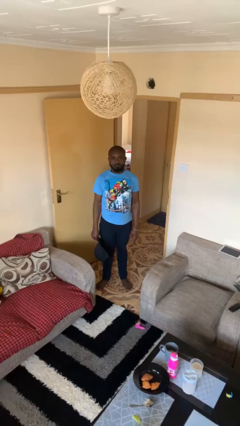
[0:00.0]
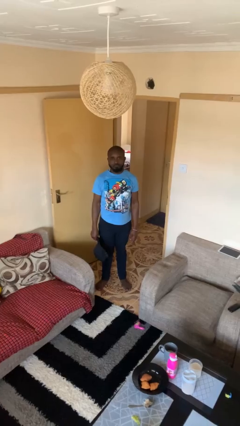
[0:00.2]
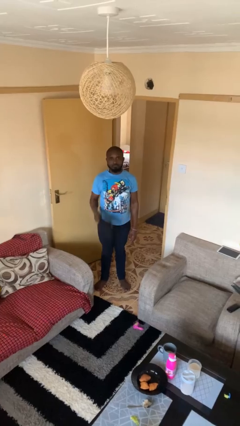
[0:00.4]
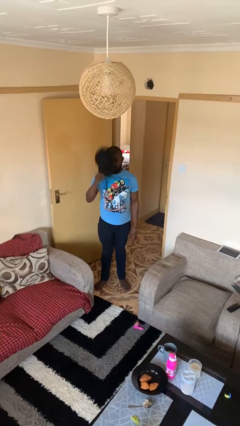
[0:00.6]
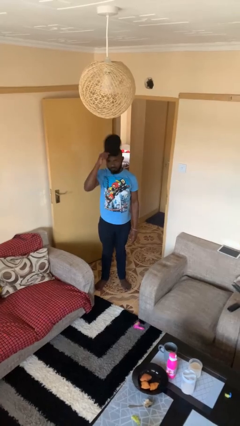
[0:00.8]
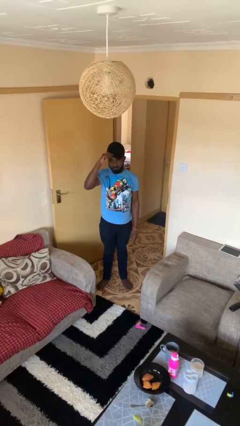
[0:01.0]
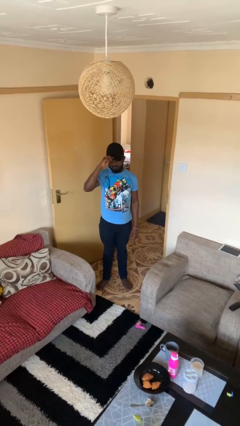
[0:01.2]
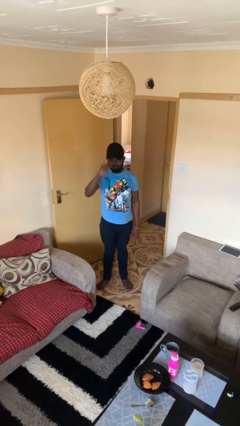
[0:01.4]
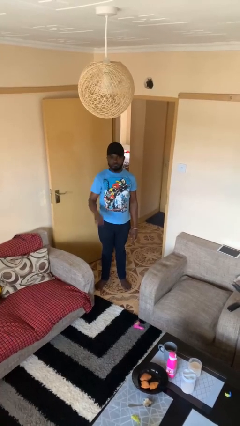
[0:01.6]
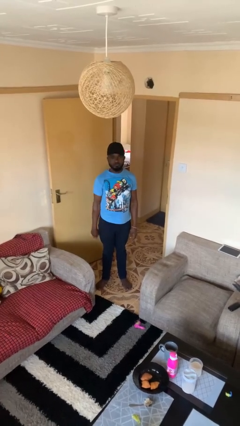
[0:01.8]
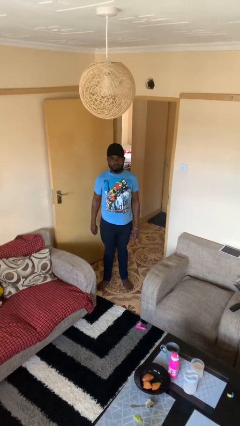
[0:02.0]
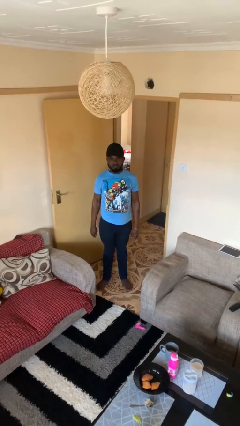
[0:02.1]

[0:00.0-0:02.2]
person puts on hat

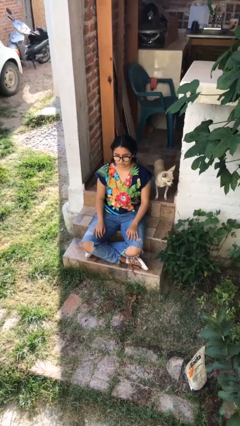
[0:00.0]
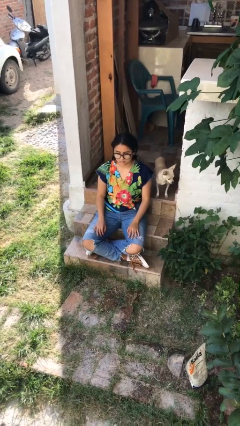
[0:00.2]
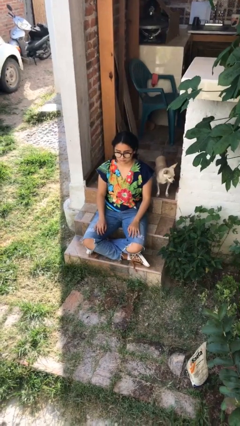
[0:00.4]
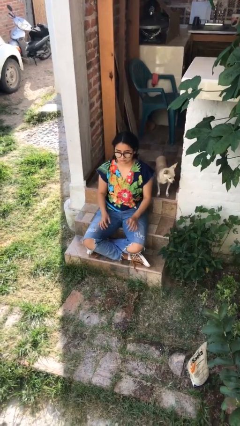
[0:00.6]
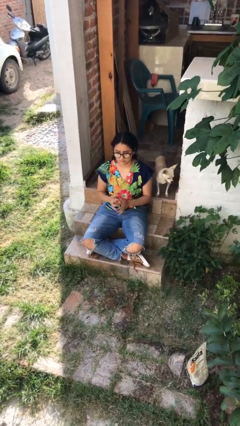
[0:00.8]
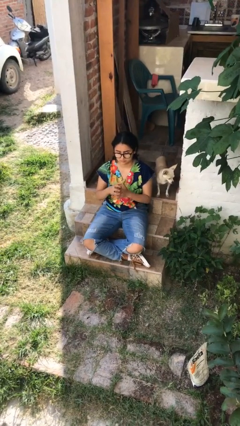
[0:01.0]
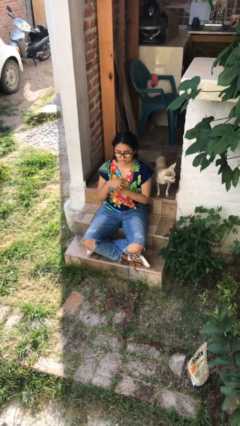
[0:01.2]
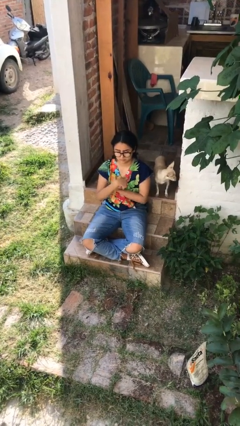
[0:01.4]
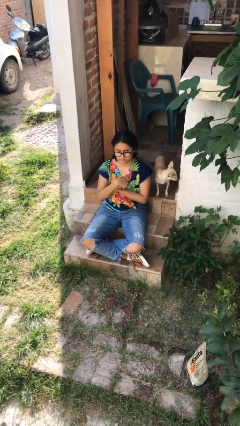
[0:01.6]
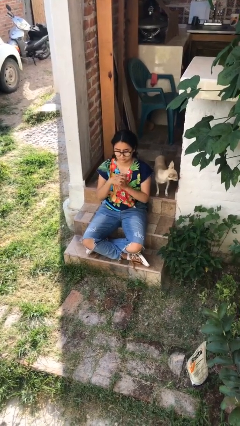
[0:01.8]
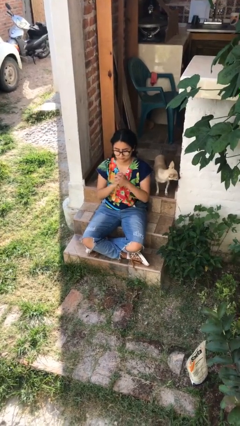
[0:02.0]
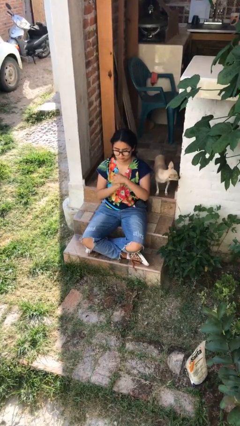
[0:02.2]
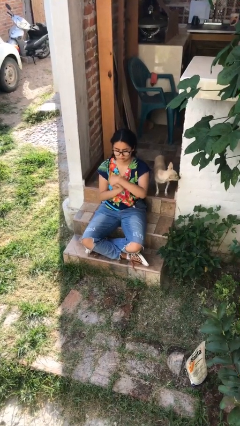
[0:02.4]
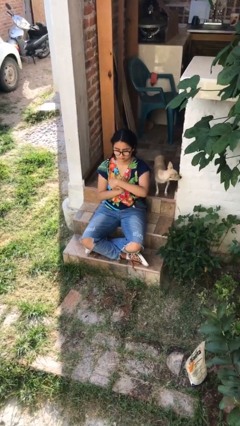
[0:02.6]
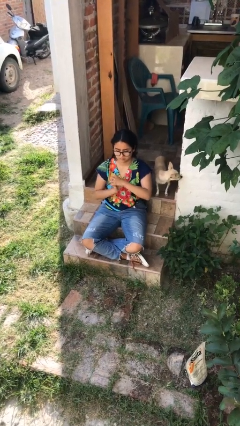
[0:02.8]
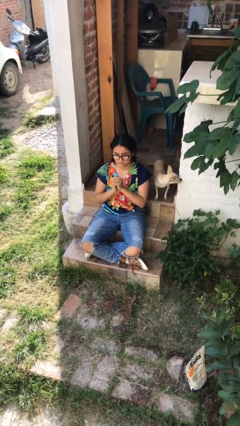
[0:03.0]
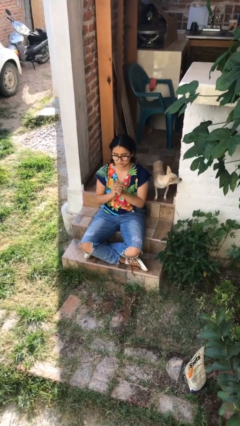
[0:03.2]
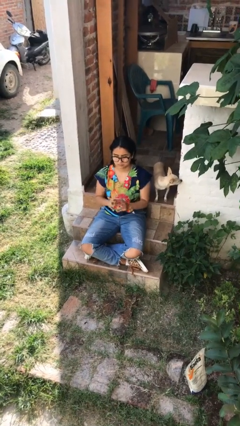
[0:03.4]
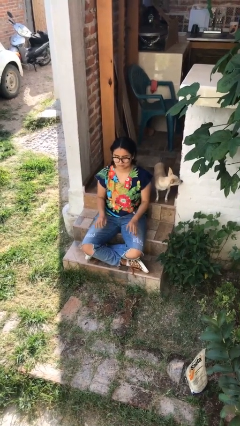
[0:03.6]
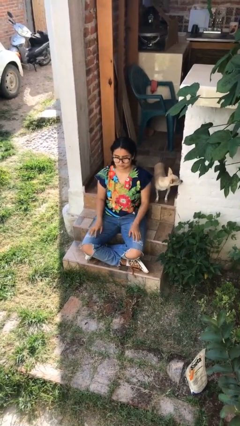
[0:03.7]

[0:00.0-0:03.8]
person cracks knuckles

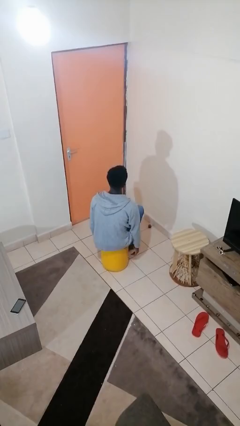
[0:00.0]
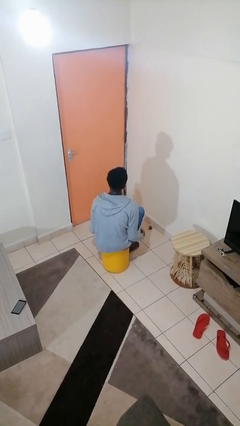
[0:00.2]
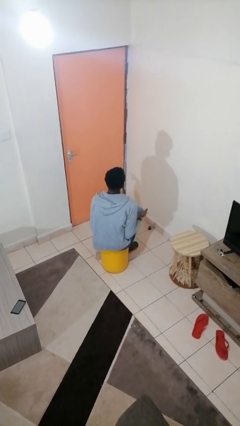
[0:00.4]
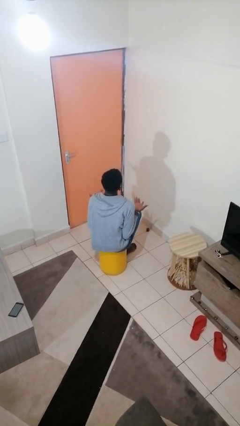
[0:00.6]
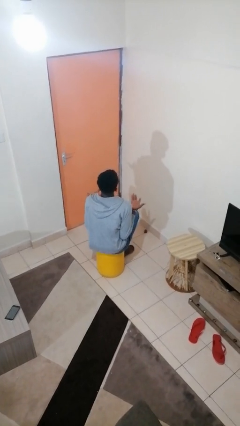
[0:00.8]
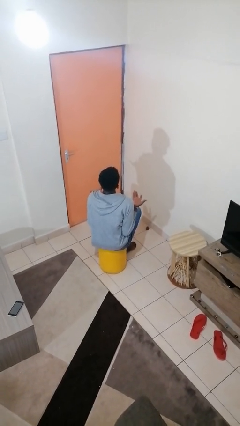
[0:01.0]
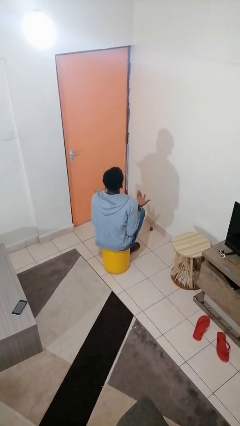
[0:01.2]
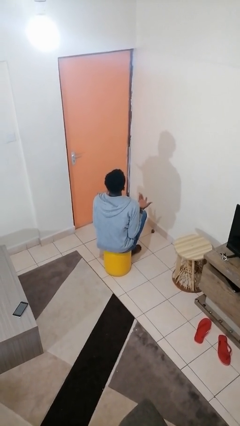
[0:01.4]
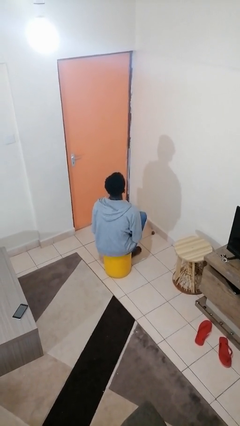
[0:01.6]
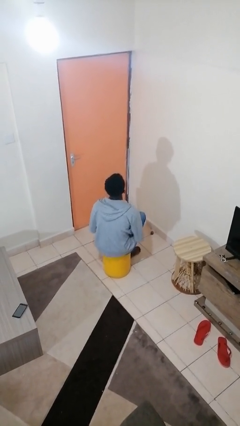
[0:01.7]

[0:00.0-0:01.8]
person shrugs

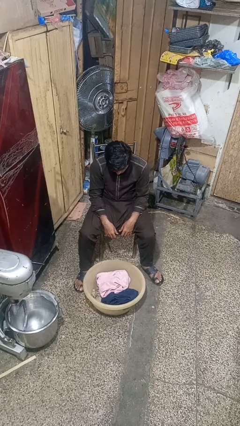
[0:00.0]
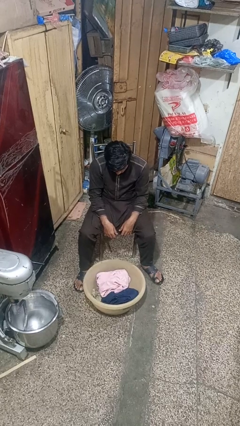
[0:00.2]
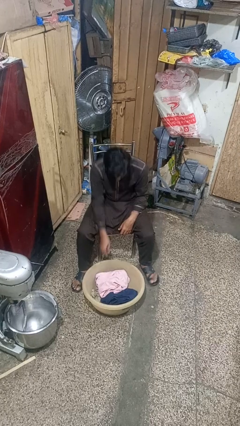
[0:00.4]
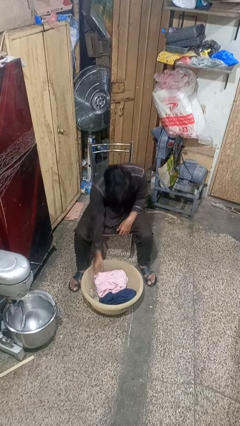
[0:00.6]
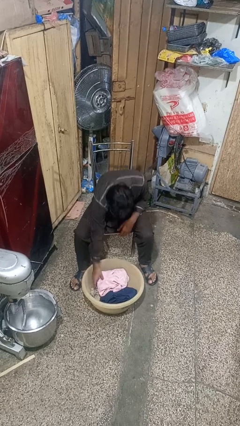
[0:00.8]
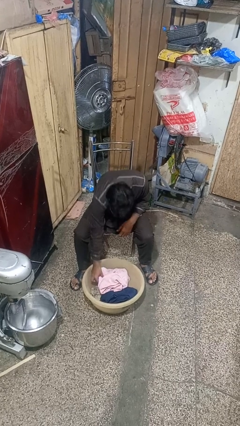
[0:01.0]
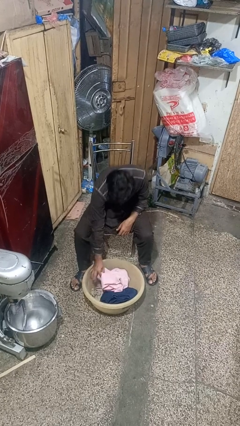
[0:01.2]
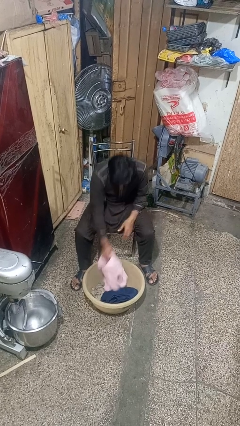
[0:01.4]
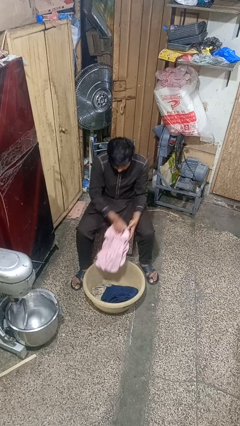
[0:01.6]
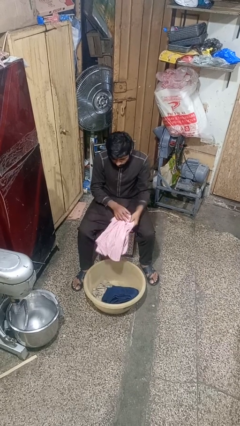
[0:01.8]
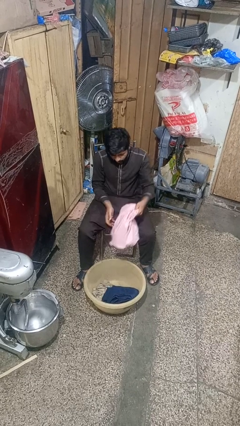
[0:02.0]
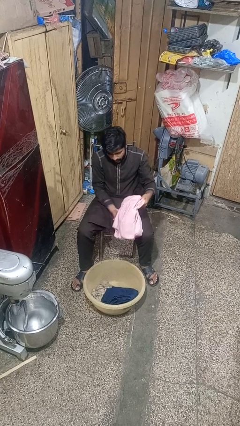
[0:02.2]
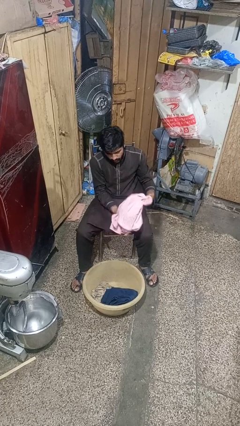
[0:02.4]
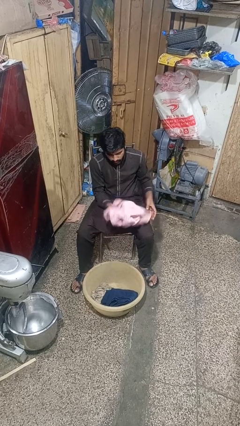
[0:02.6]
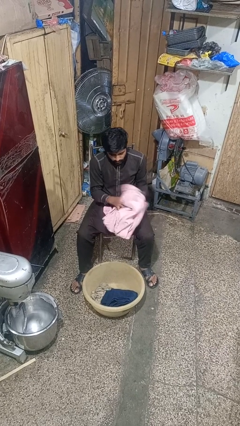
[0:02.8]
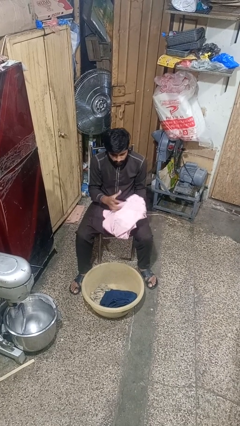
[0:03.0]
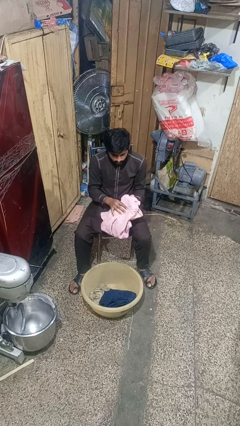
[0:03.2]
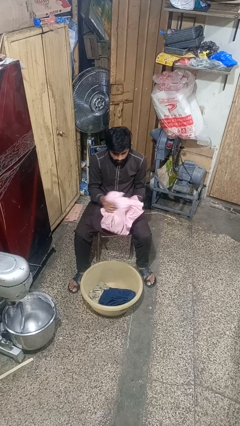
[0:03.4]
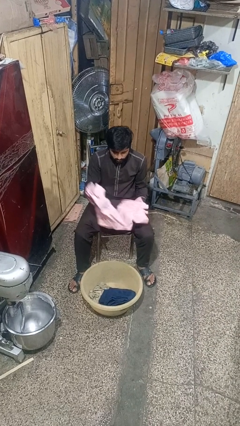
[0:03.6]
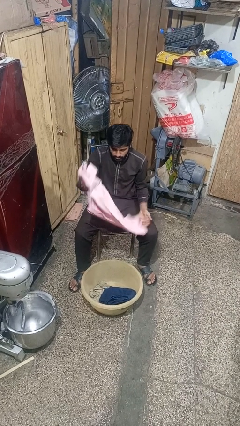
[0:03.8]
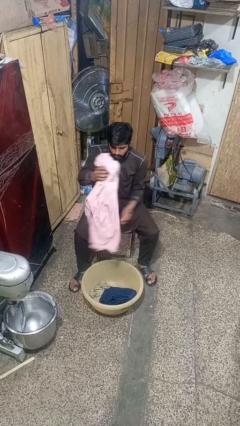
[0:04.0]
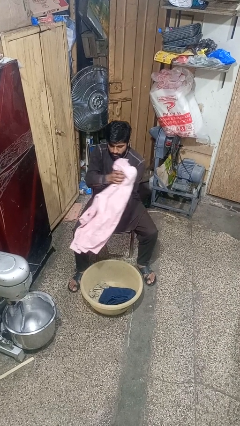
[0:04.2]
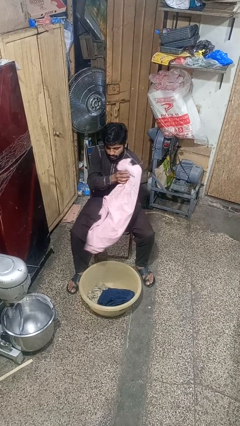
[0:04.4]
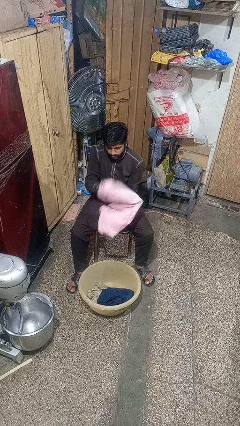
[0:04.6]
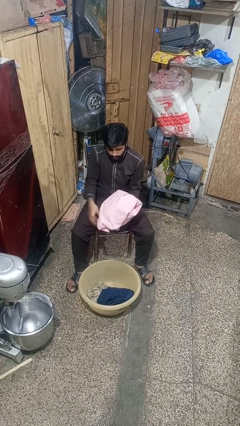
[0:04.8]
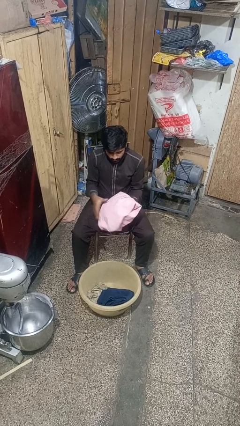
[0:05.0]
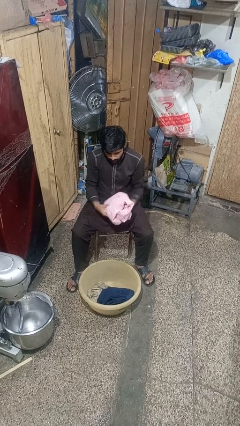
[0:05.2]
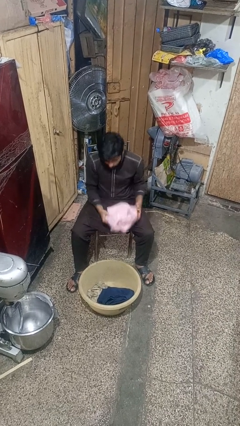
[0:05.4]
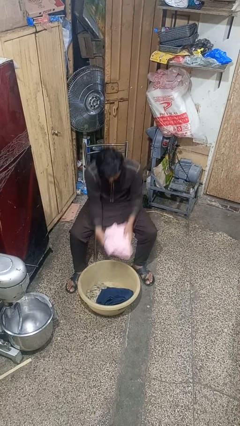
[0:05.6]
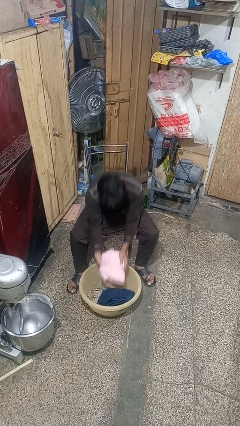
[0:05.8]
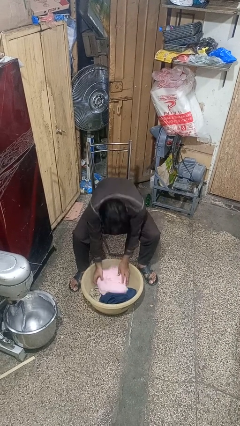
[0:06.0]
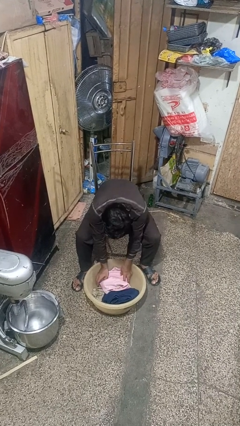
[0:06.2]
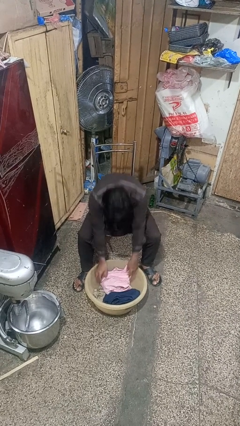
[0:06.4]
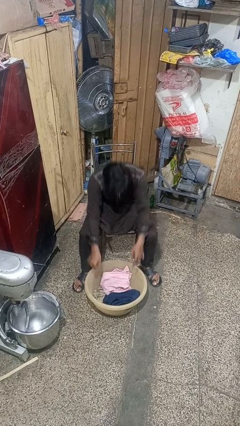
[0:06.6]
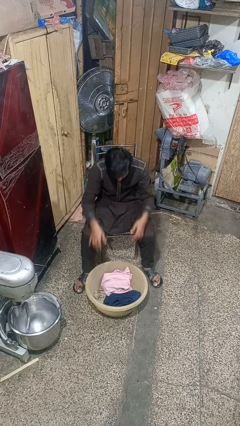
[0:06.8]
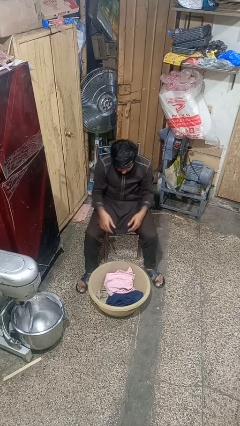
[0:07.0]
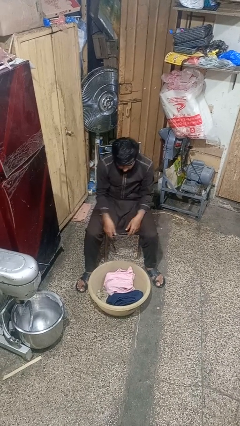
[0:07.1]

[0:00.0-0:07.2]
person folds shirt

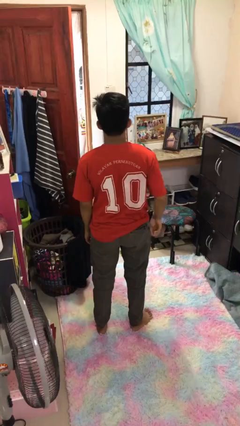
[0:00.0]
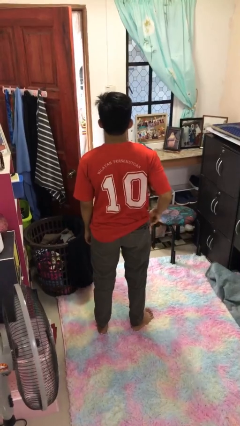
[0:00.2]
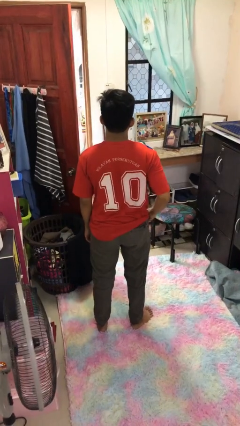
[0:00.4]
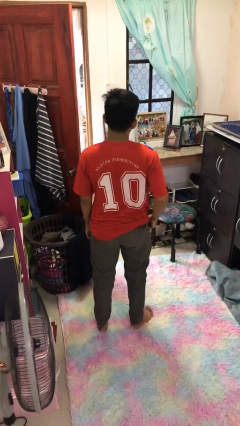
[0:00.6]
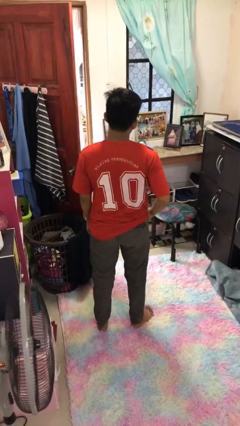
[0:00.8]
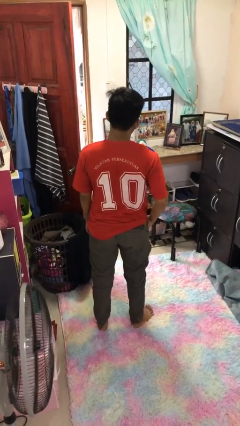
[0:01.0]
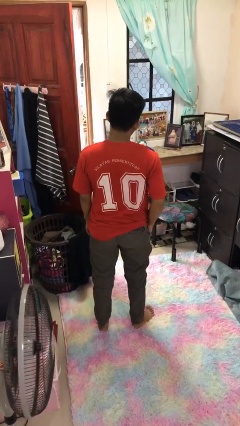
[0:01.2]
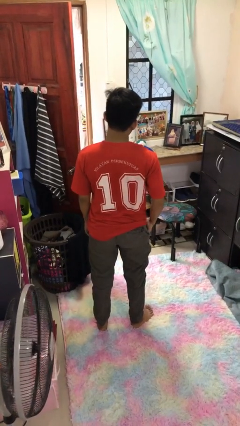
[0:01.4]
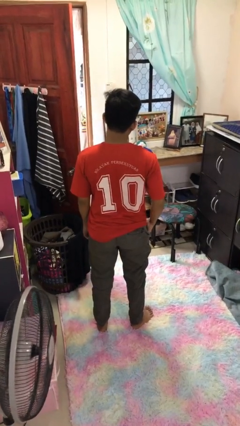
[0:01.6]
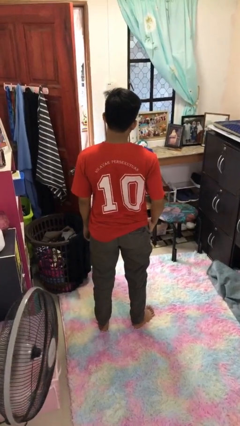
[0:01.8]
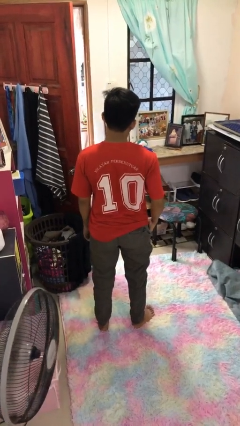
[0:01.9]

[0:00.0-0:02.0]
person puts hands in back pockets

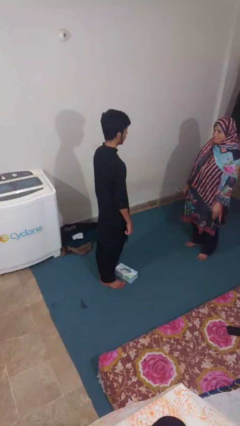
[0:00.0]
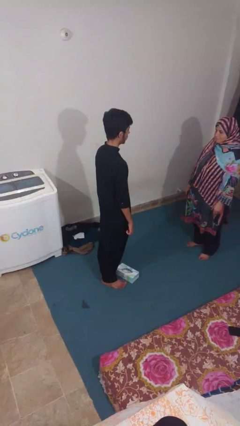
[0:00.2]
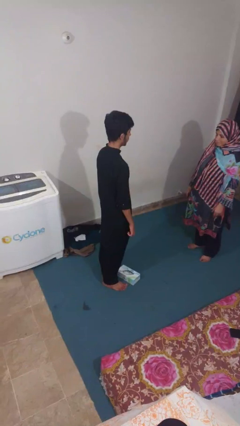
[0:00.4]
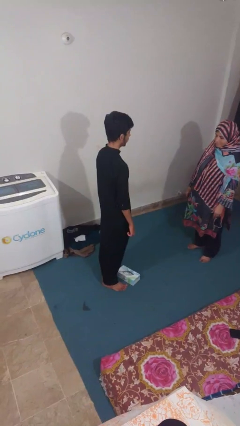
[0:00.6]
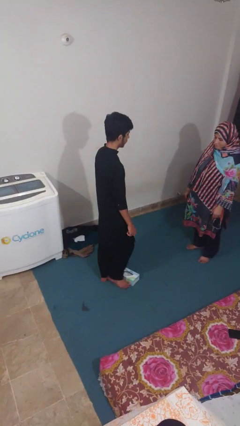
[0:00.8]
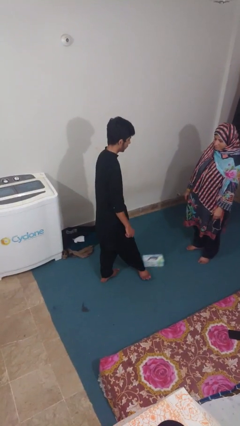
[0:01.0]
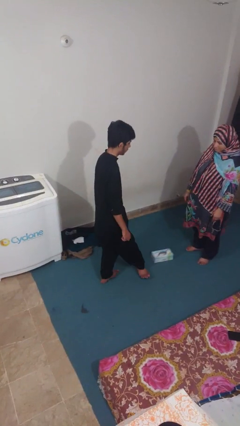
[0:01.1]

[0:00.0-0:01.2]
person kicks object to person
